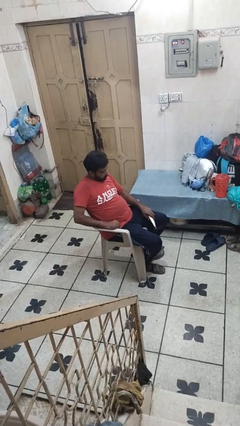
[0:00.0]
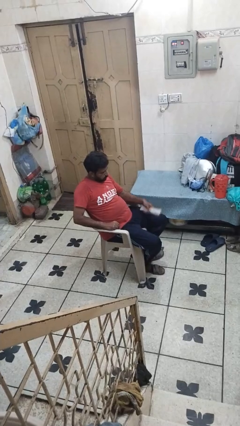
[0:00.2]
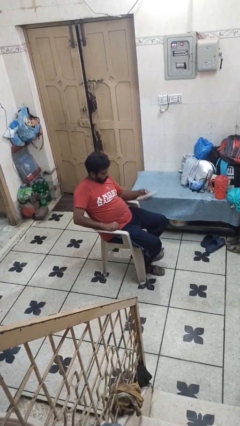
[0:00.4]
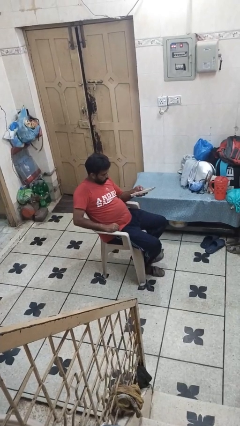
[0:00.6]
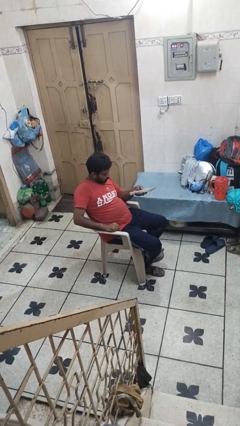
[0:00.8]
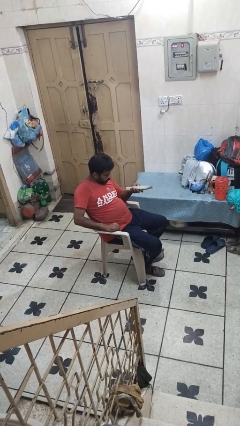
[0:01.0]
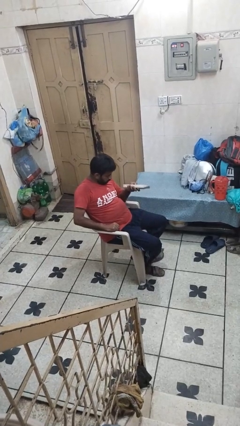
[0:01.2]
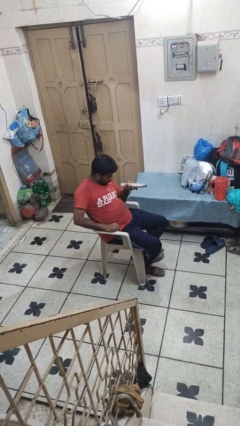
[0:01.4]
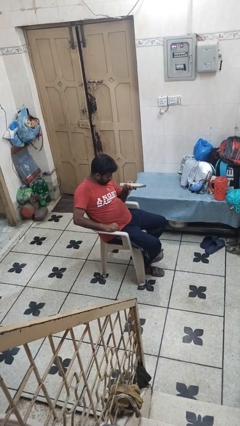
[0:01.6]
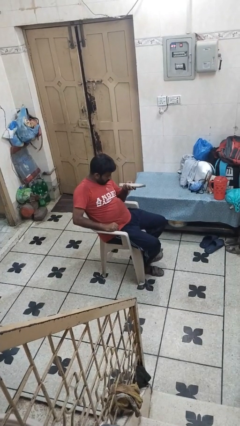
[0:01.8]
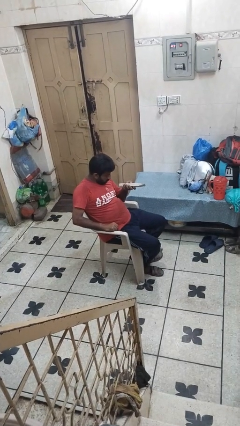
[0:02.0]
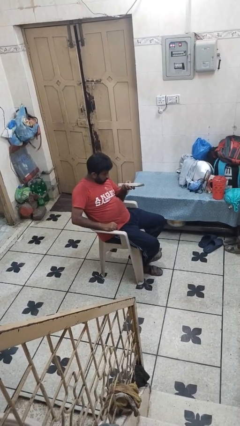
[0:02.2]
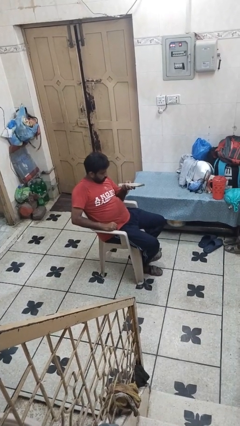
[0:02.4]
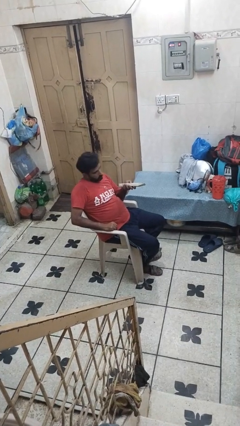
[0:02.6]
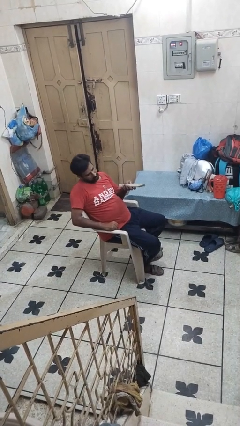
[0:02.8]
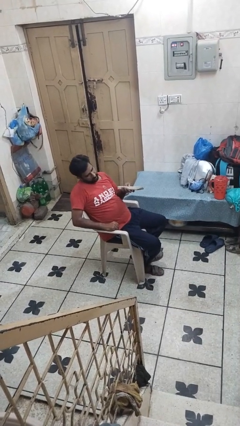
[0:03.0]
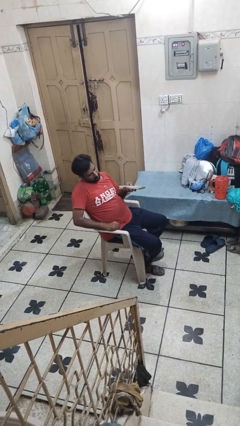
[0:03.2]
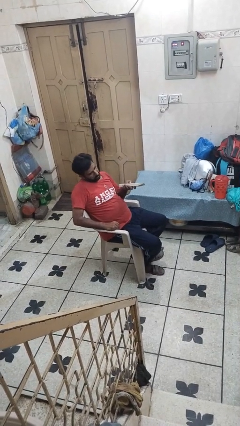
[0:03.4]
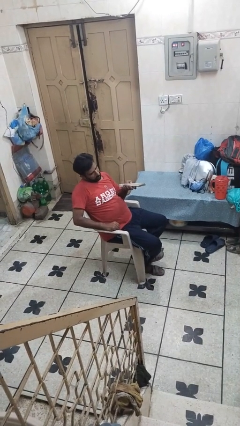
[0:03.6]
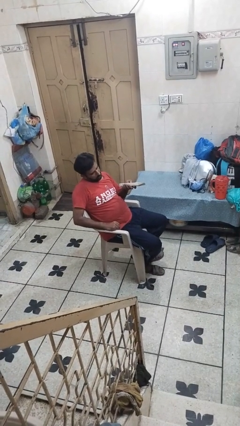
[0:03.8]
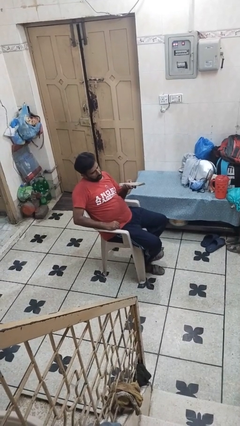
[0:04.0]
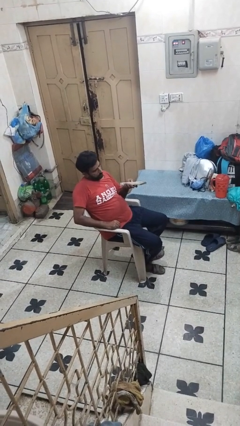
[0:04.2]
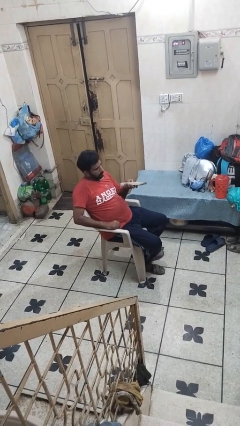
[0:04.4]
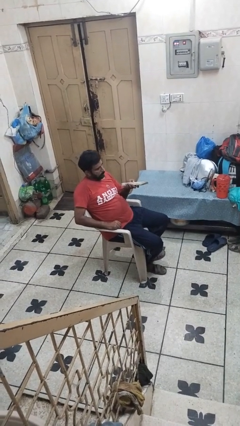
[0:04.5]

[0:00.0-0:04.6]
person uses television remote

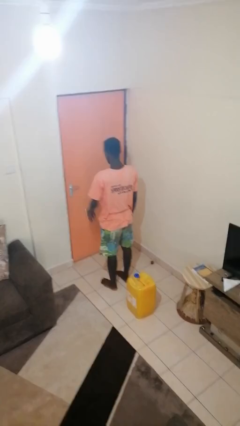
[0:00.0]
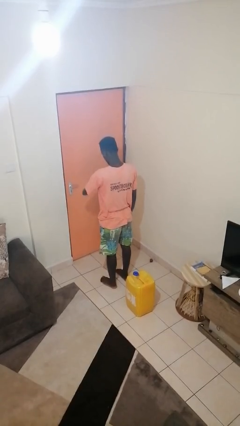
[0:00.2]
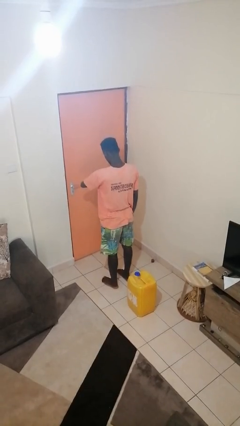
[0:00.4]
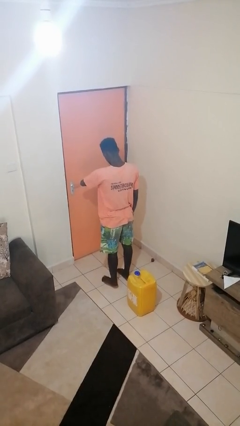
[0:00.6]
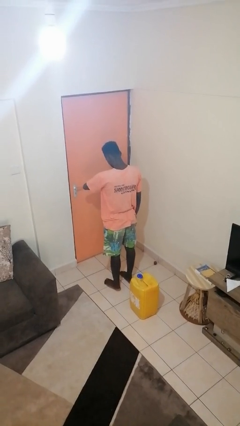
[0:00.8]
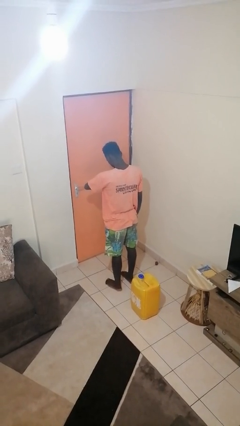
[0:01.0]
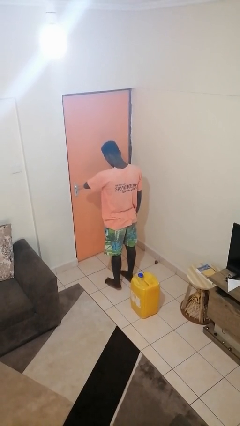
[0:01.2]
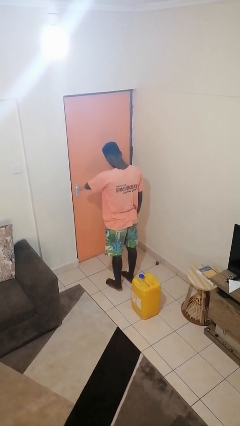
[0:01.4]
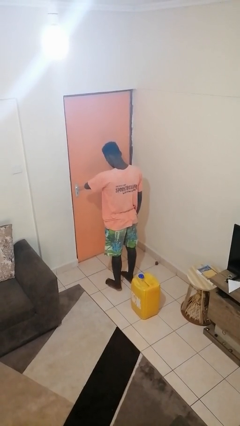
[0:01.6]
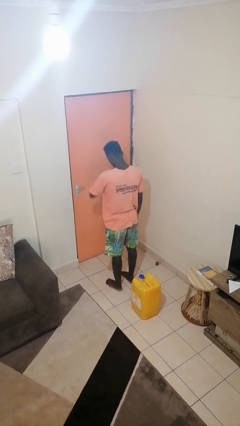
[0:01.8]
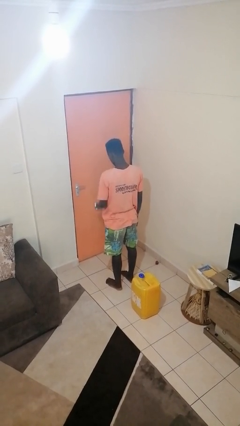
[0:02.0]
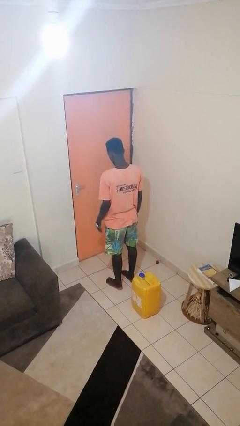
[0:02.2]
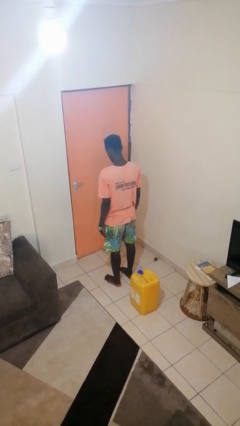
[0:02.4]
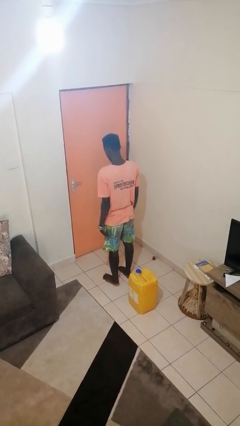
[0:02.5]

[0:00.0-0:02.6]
person looks at wristwatch

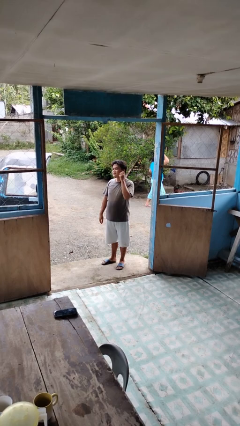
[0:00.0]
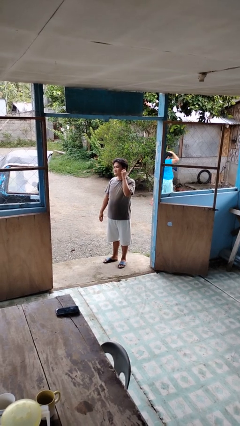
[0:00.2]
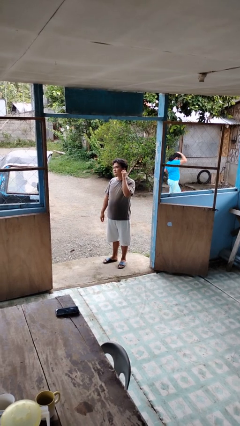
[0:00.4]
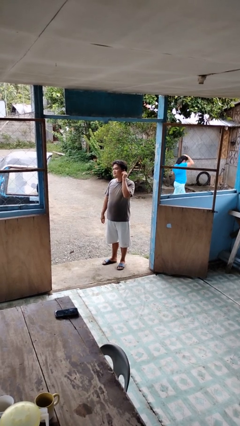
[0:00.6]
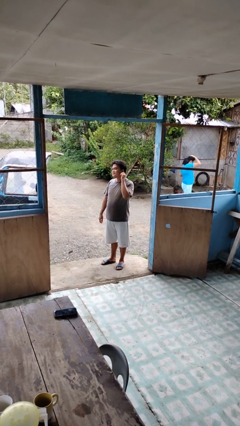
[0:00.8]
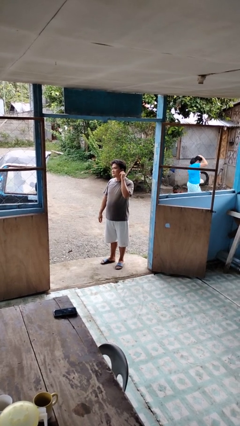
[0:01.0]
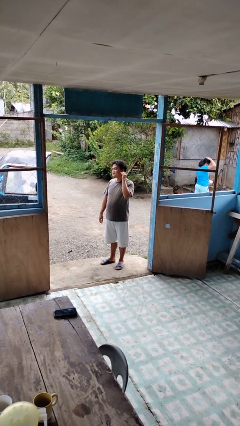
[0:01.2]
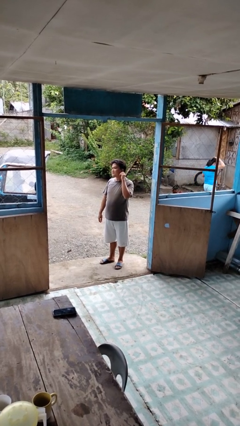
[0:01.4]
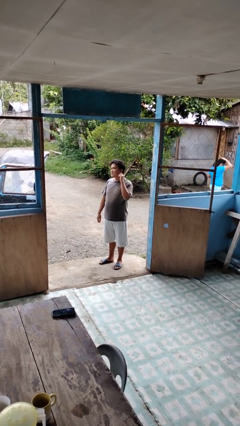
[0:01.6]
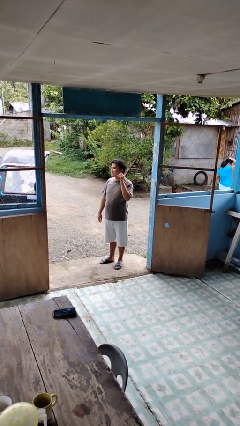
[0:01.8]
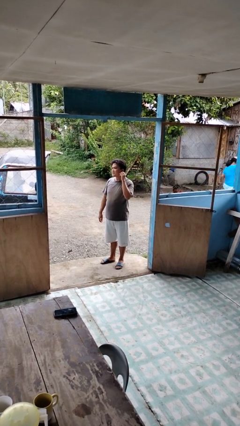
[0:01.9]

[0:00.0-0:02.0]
person touches earlobe

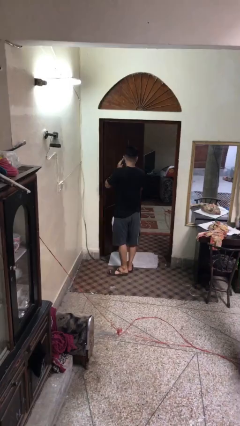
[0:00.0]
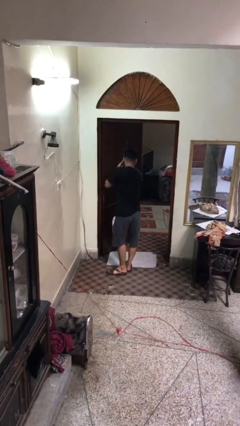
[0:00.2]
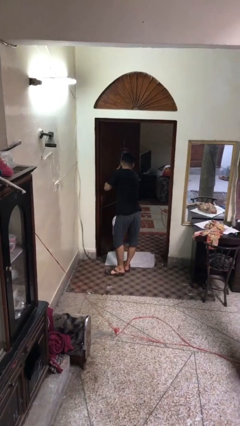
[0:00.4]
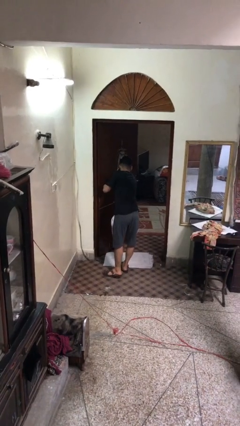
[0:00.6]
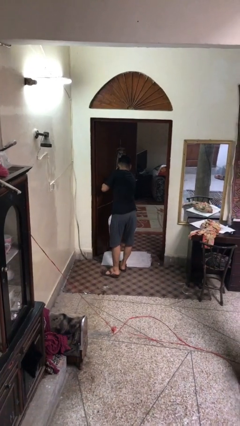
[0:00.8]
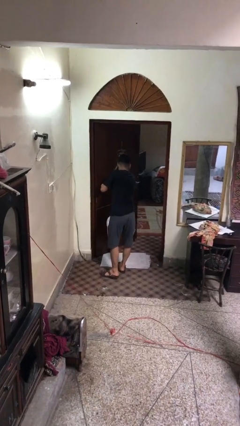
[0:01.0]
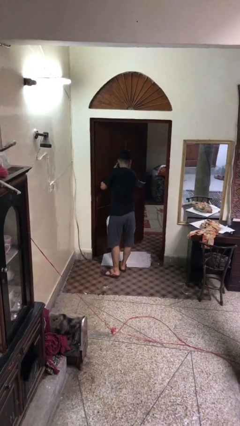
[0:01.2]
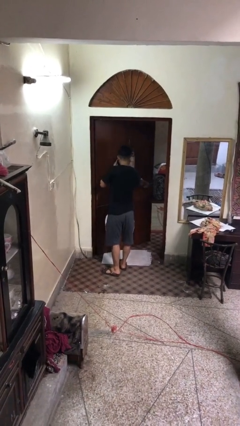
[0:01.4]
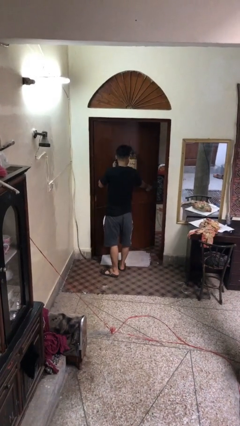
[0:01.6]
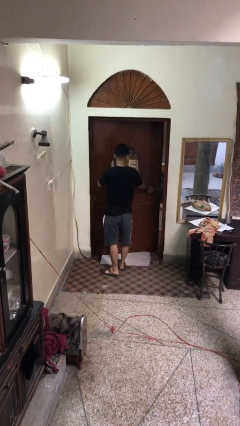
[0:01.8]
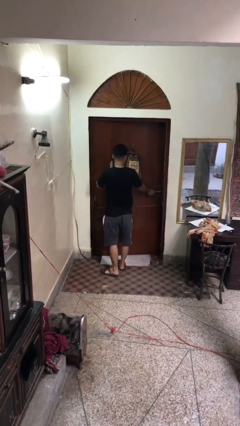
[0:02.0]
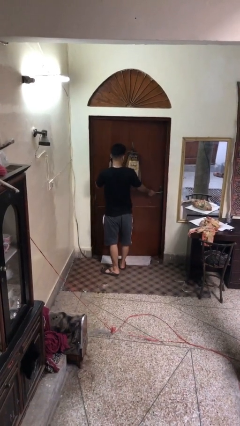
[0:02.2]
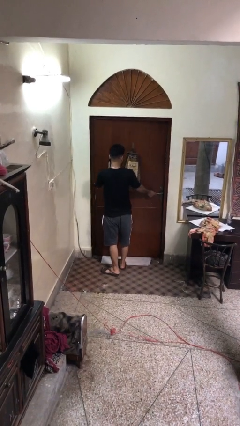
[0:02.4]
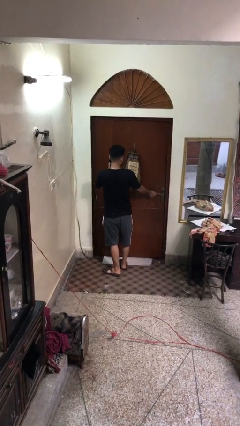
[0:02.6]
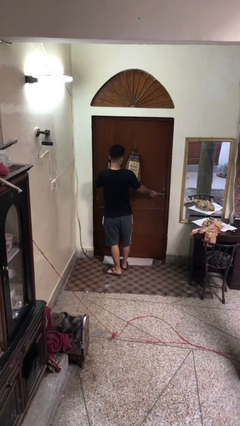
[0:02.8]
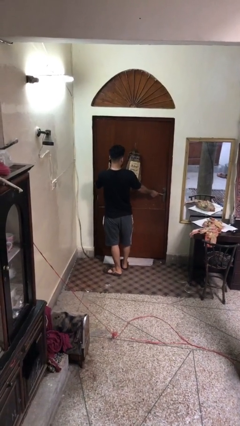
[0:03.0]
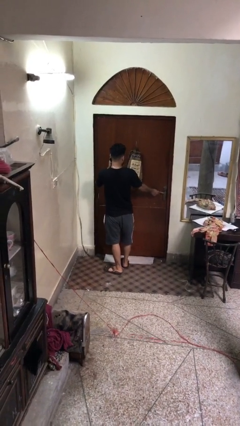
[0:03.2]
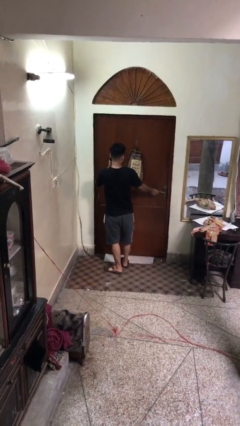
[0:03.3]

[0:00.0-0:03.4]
person closes facility door

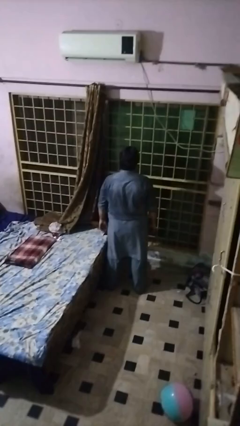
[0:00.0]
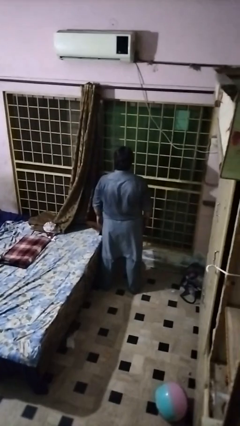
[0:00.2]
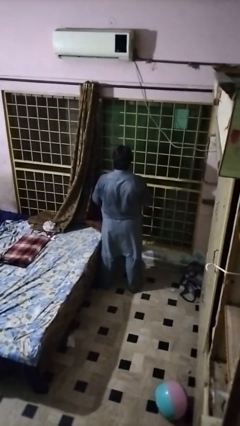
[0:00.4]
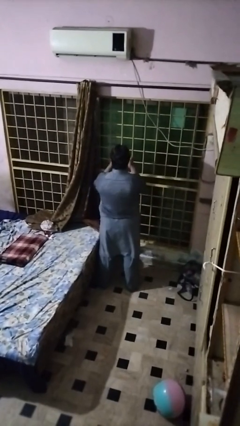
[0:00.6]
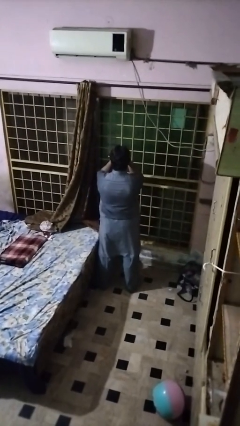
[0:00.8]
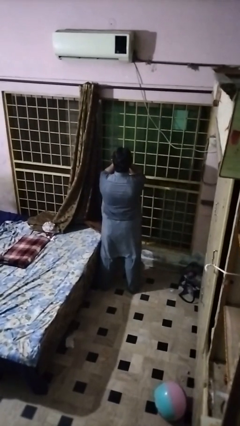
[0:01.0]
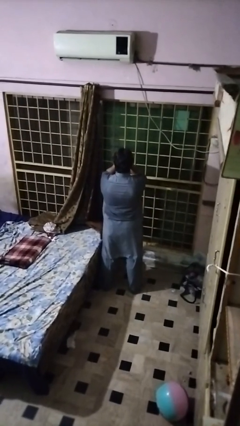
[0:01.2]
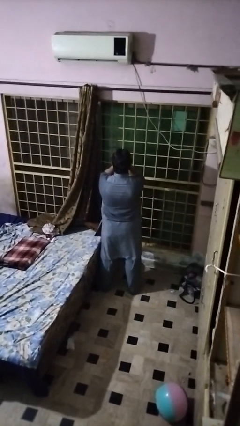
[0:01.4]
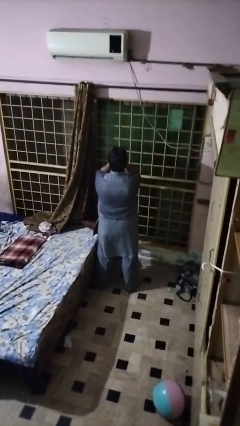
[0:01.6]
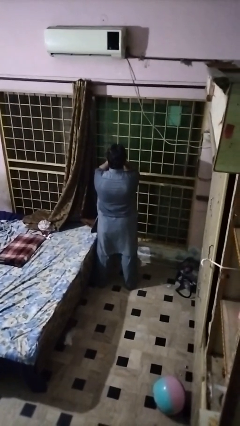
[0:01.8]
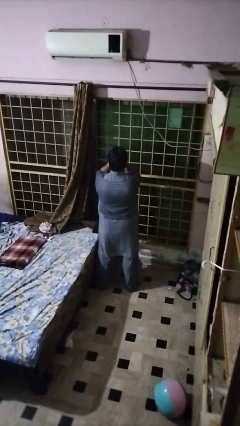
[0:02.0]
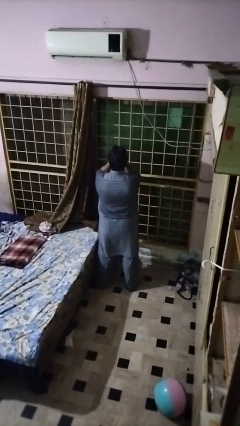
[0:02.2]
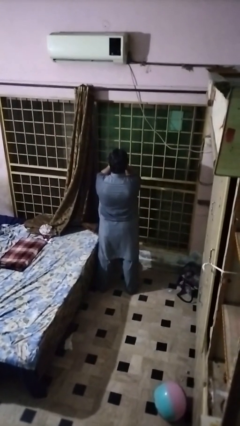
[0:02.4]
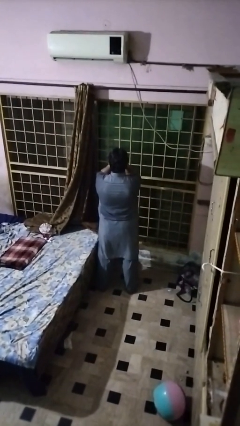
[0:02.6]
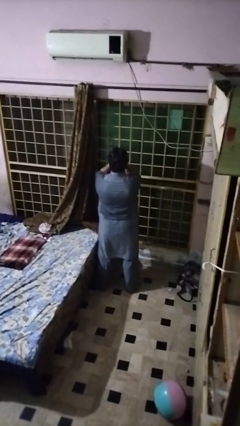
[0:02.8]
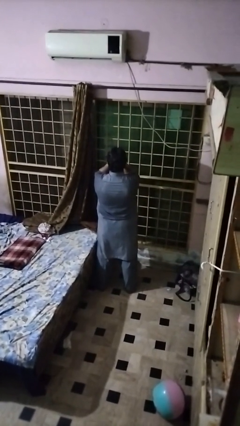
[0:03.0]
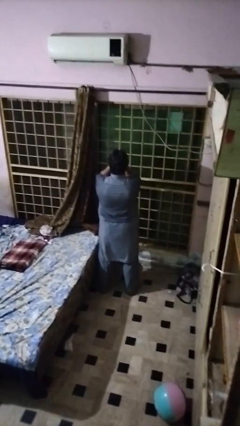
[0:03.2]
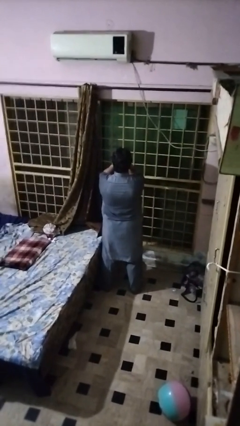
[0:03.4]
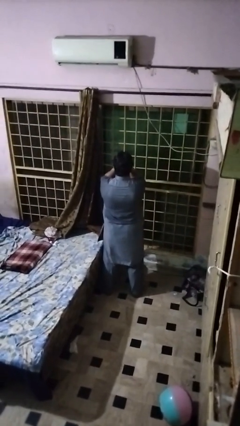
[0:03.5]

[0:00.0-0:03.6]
person covers face with hands

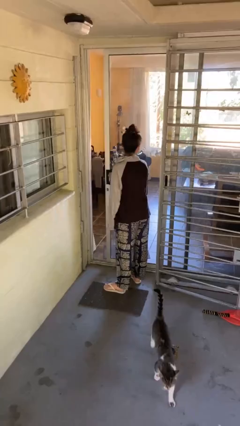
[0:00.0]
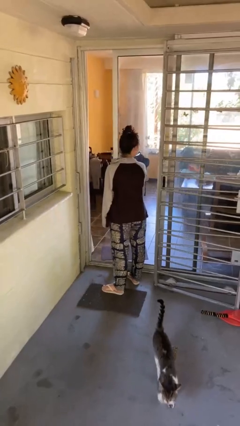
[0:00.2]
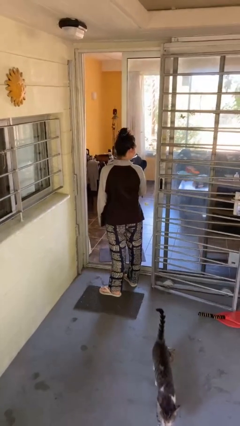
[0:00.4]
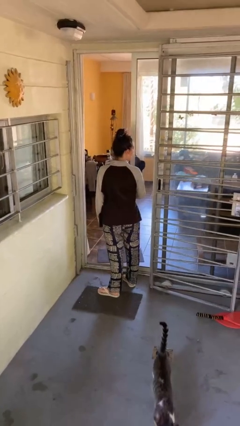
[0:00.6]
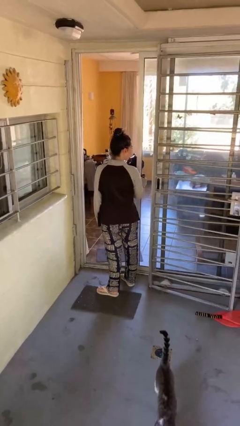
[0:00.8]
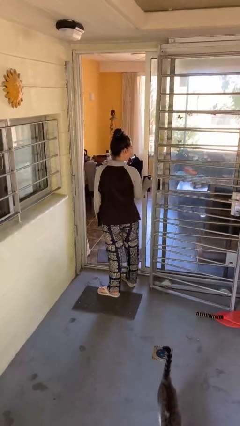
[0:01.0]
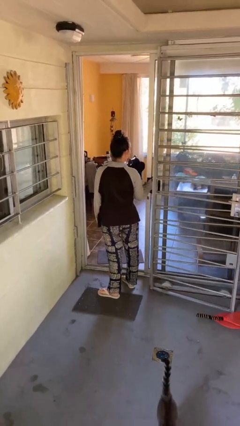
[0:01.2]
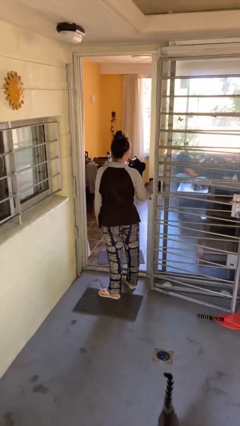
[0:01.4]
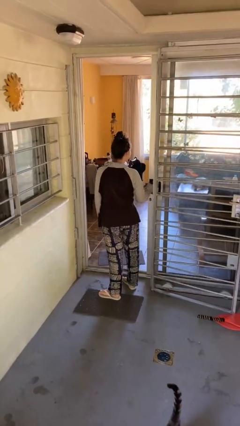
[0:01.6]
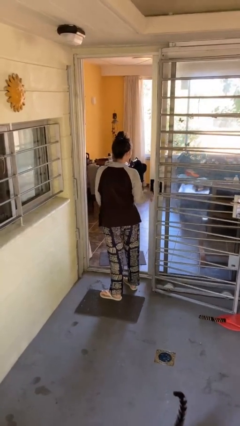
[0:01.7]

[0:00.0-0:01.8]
person opens facility door
